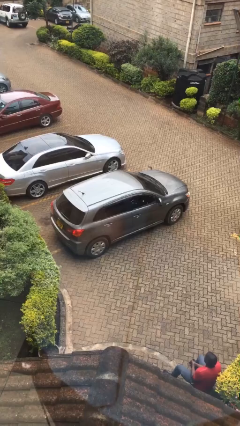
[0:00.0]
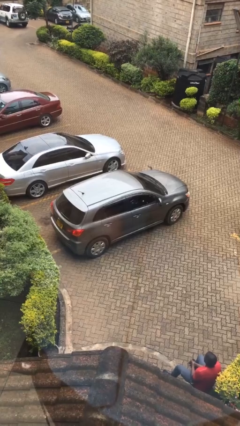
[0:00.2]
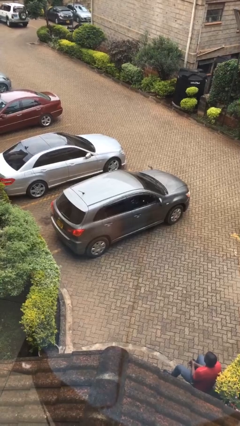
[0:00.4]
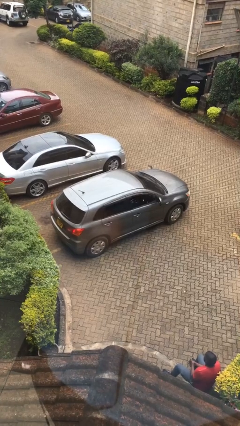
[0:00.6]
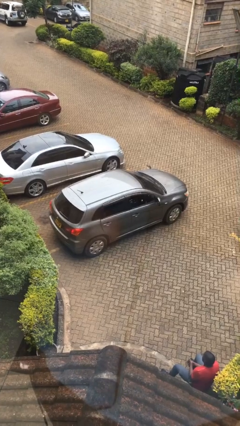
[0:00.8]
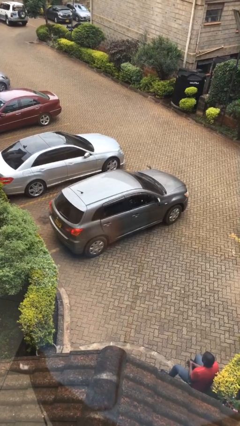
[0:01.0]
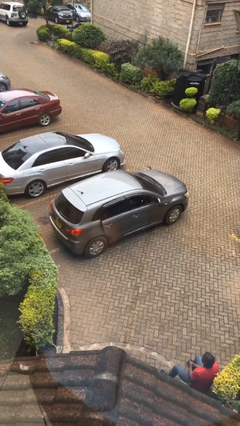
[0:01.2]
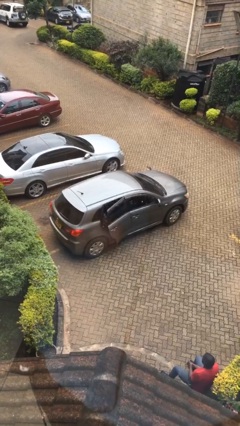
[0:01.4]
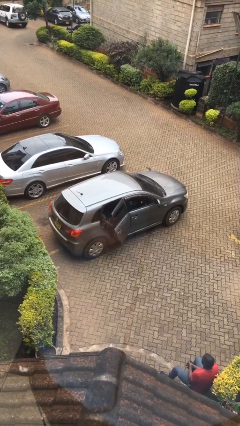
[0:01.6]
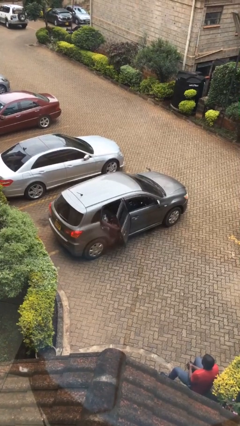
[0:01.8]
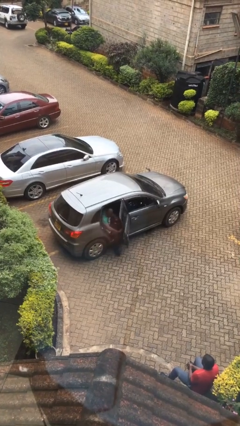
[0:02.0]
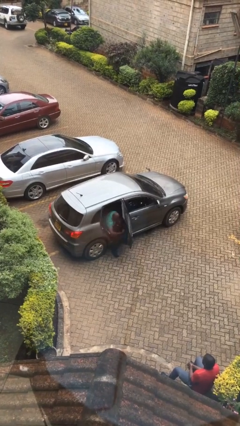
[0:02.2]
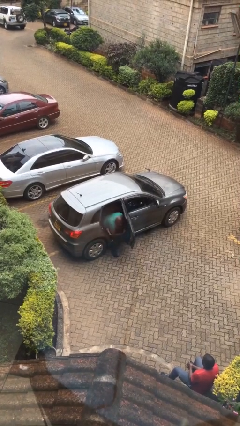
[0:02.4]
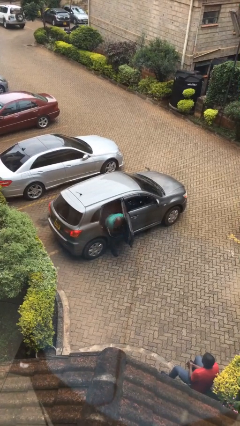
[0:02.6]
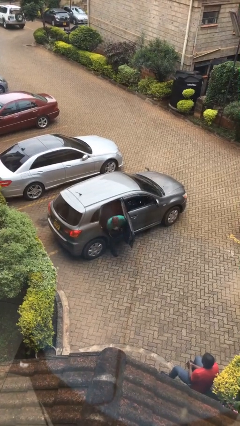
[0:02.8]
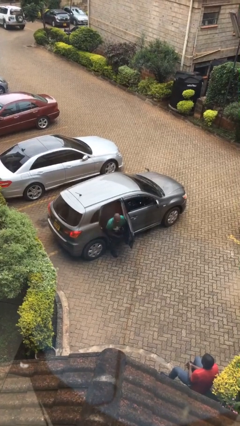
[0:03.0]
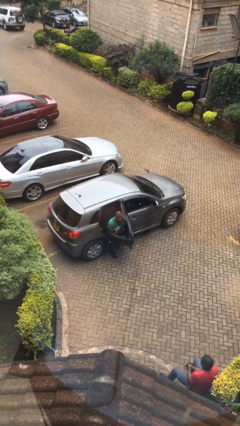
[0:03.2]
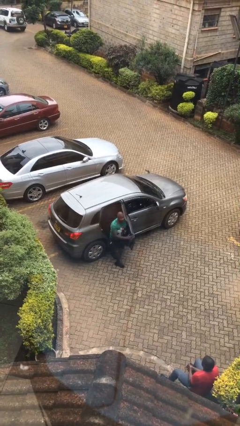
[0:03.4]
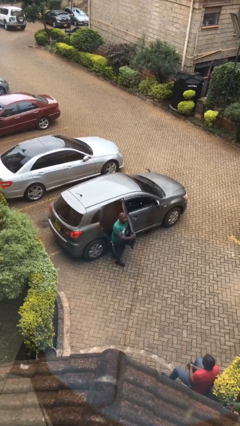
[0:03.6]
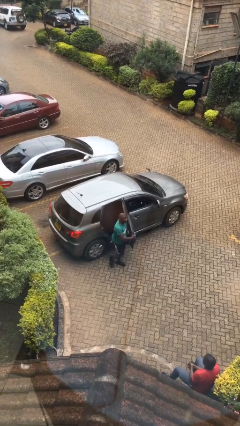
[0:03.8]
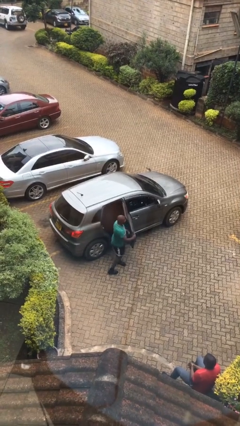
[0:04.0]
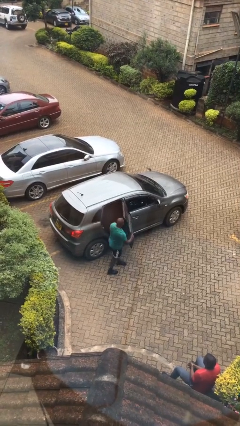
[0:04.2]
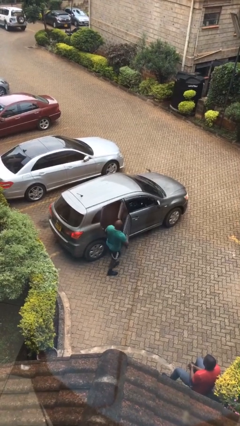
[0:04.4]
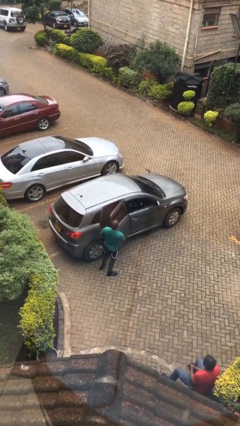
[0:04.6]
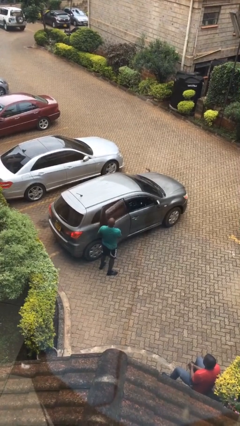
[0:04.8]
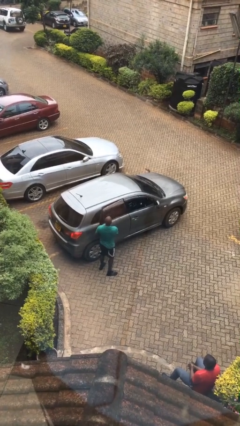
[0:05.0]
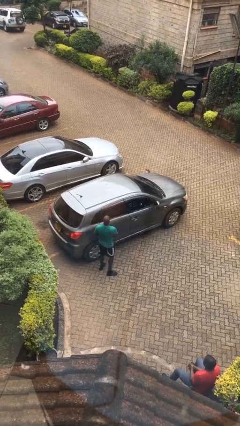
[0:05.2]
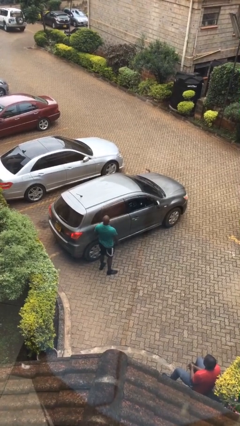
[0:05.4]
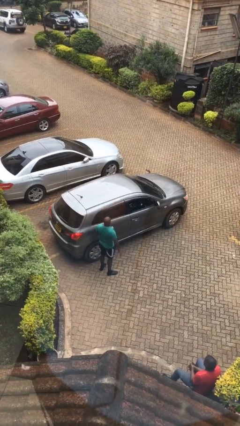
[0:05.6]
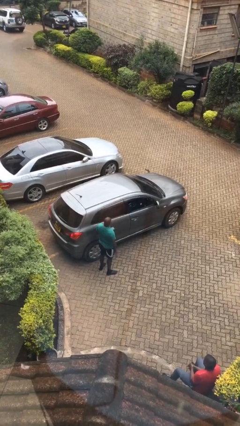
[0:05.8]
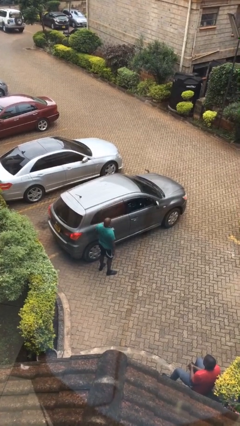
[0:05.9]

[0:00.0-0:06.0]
car drops off person

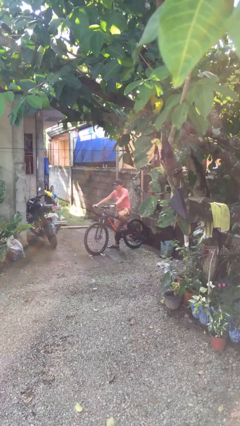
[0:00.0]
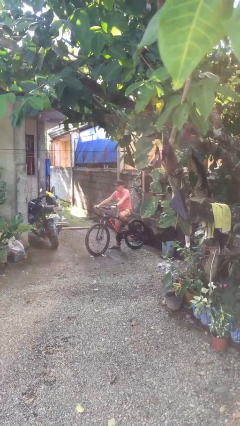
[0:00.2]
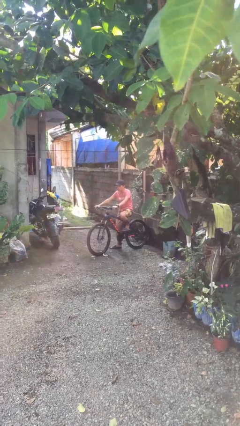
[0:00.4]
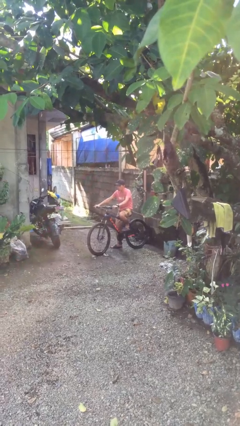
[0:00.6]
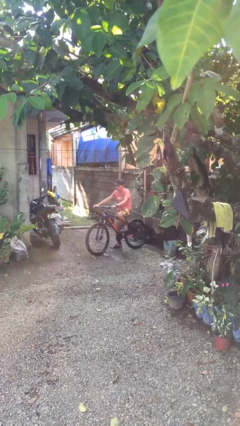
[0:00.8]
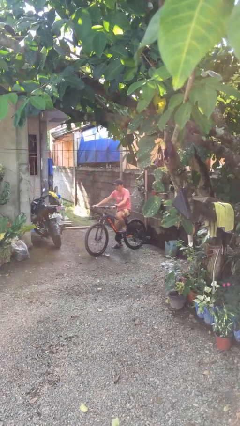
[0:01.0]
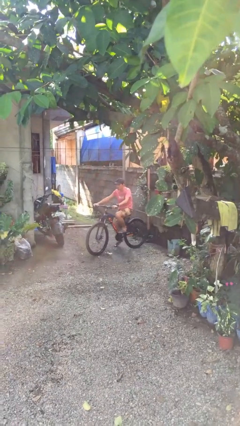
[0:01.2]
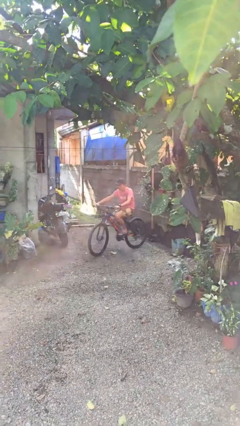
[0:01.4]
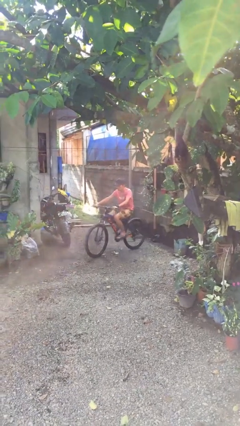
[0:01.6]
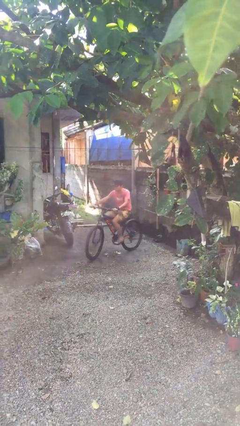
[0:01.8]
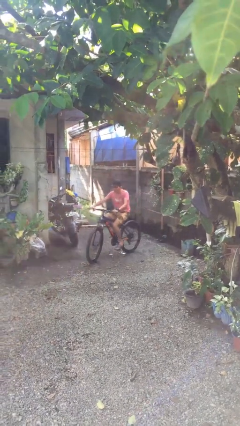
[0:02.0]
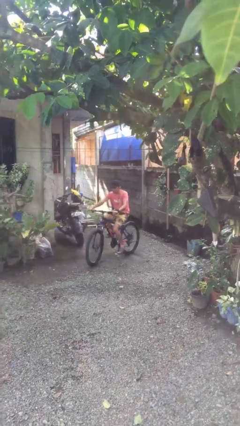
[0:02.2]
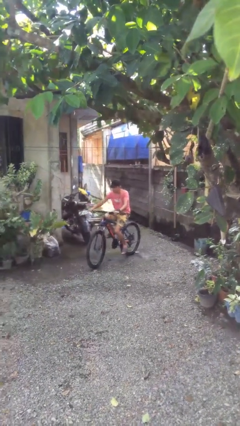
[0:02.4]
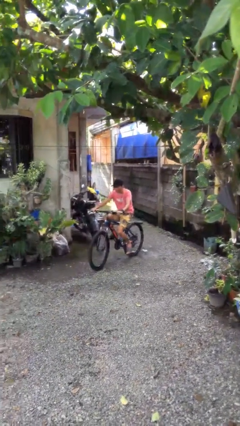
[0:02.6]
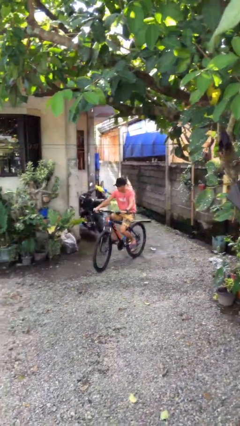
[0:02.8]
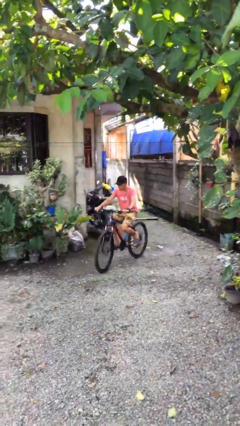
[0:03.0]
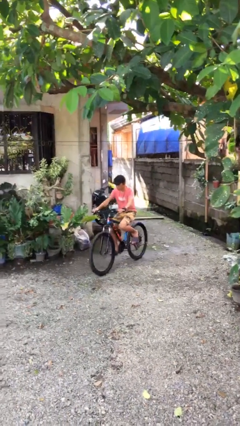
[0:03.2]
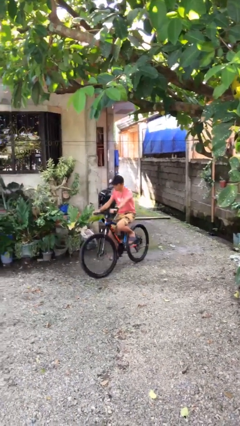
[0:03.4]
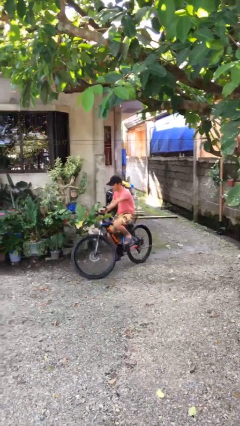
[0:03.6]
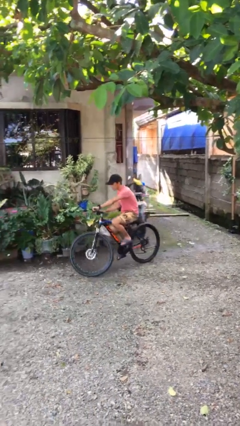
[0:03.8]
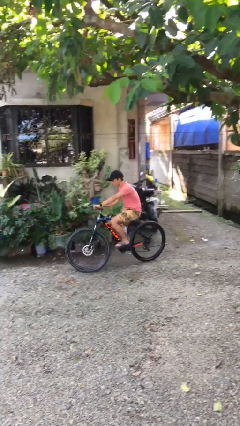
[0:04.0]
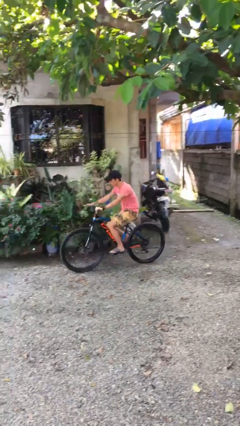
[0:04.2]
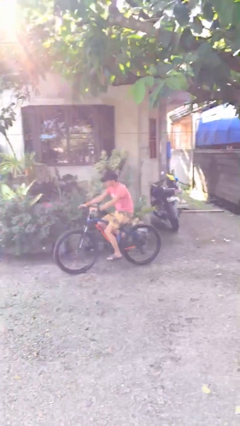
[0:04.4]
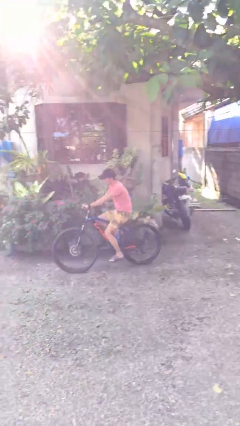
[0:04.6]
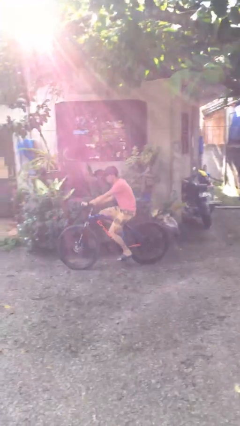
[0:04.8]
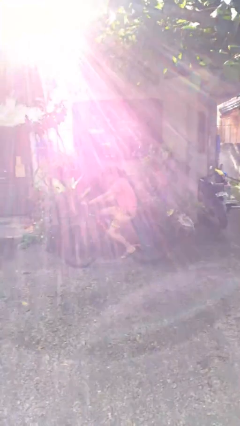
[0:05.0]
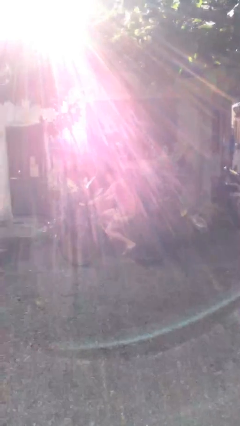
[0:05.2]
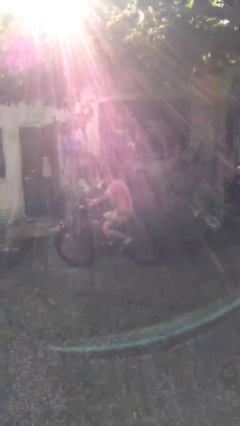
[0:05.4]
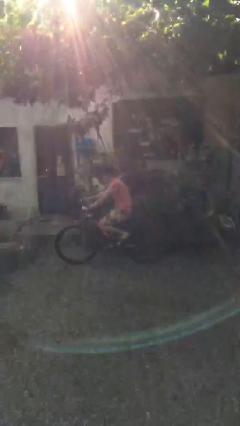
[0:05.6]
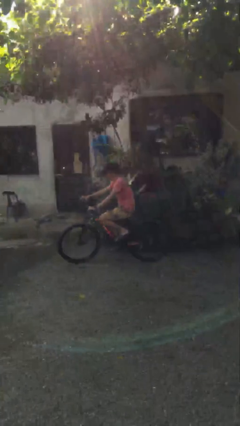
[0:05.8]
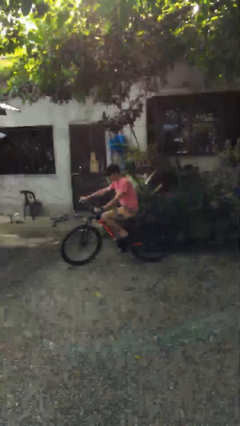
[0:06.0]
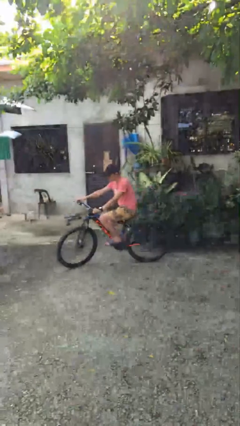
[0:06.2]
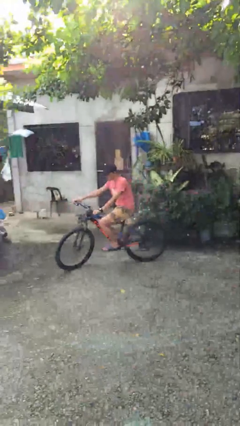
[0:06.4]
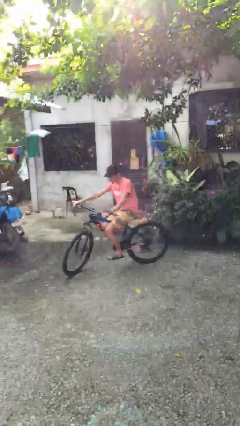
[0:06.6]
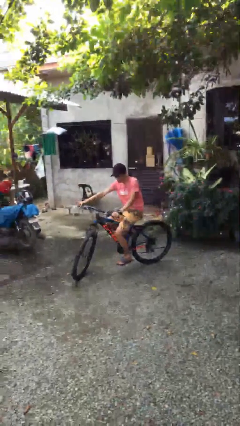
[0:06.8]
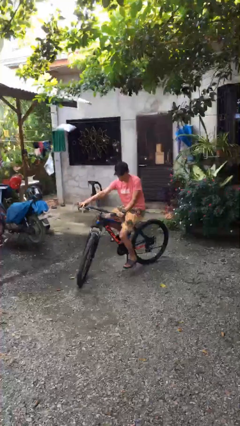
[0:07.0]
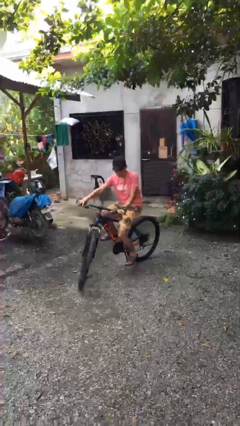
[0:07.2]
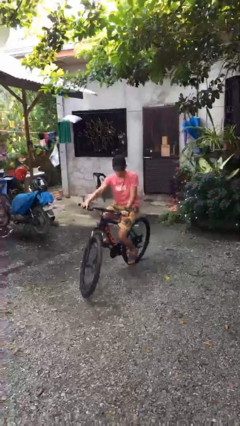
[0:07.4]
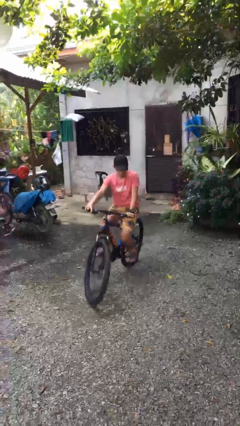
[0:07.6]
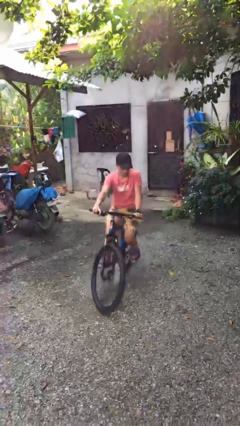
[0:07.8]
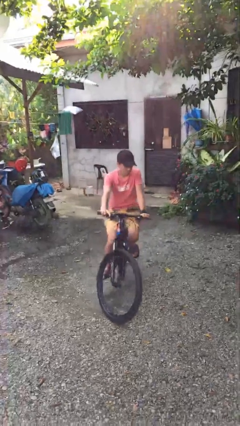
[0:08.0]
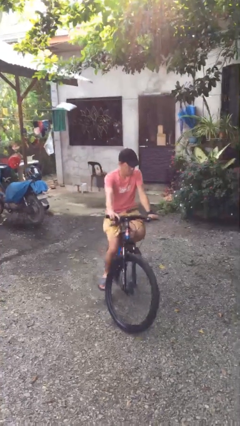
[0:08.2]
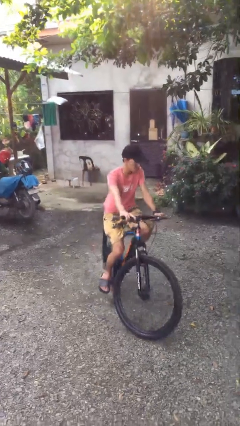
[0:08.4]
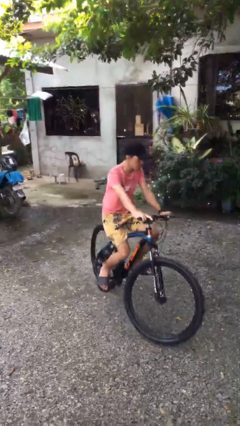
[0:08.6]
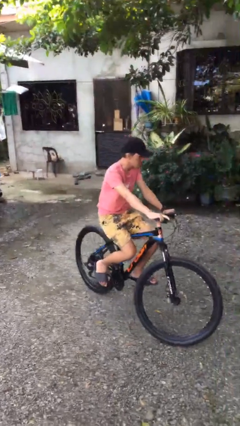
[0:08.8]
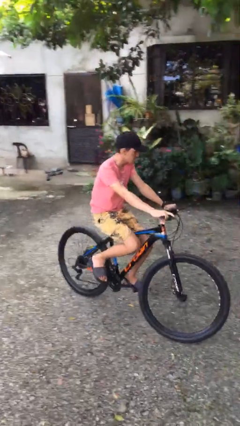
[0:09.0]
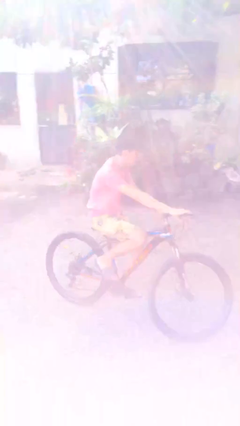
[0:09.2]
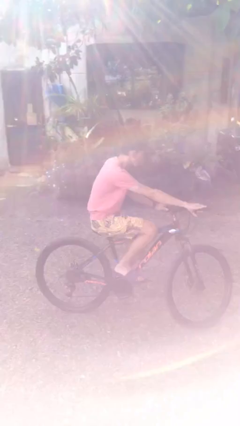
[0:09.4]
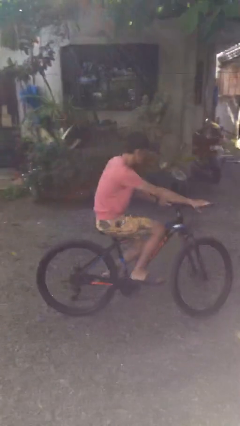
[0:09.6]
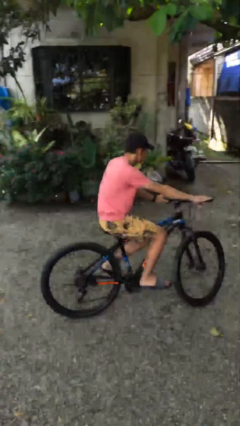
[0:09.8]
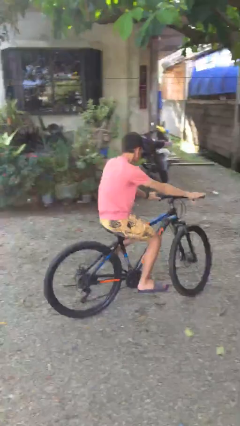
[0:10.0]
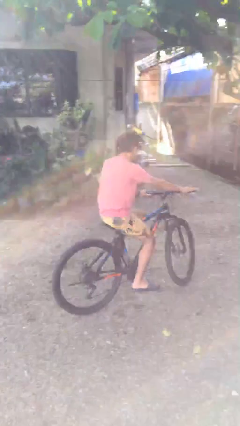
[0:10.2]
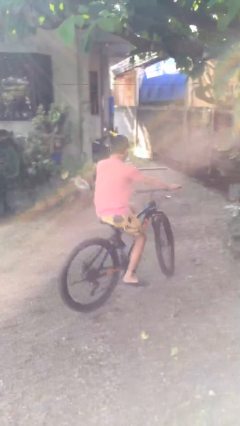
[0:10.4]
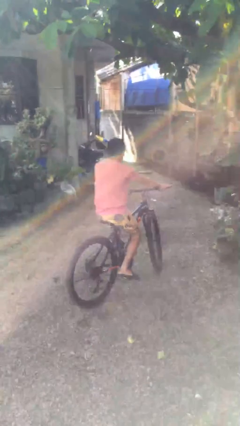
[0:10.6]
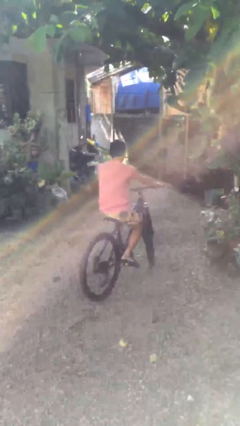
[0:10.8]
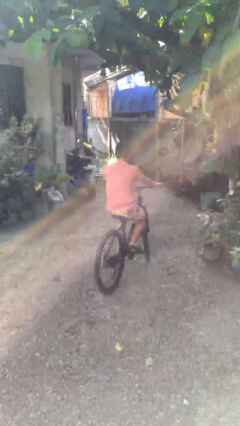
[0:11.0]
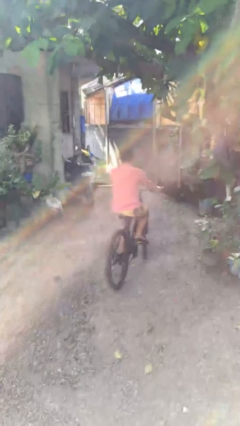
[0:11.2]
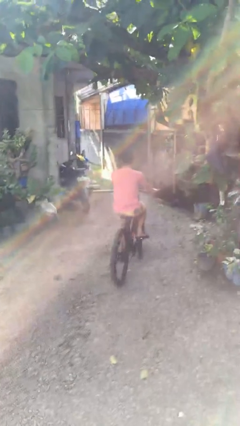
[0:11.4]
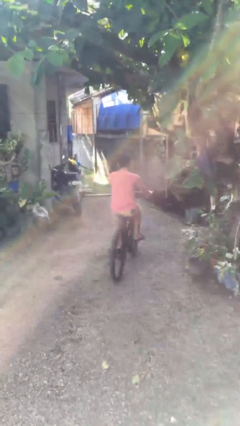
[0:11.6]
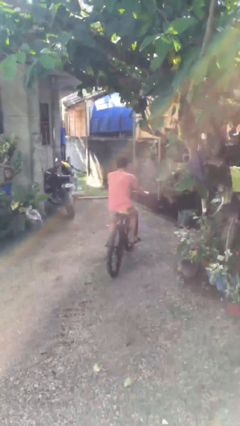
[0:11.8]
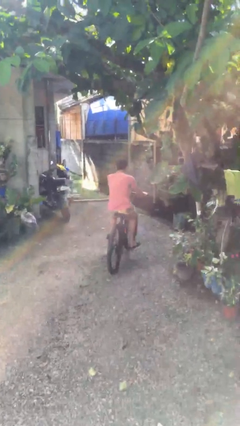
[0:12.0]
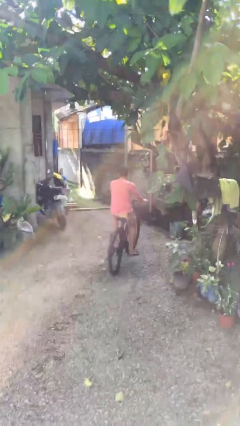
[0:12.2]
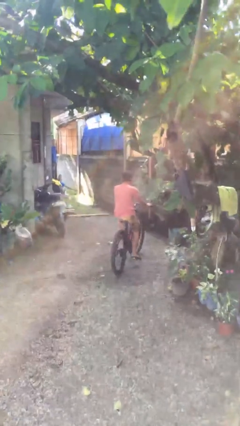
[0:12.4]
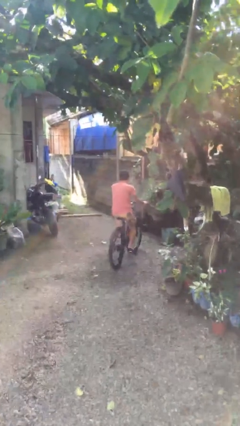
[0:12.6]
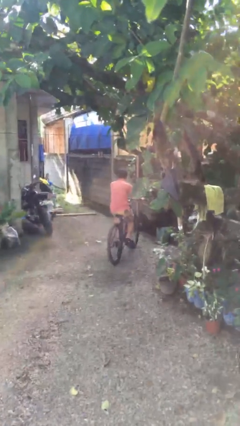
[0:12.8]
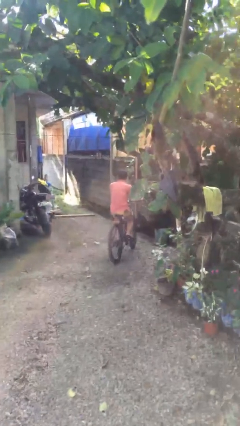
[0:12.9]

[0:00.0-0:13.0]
person rides bicycle
